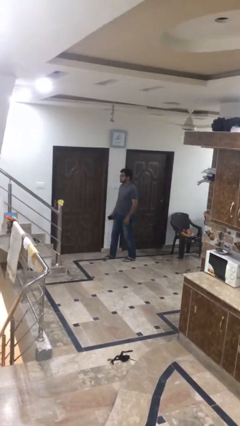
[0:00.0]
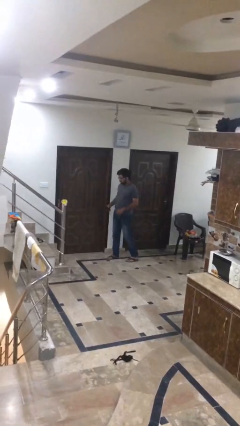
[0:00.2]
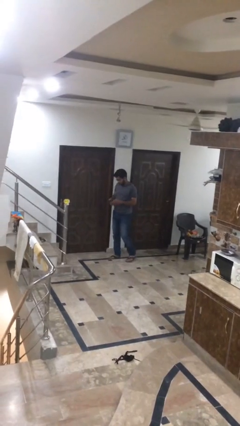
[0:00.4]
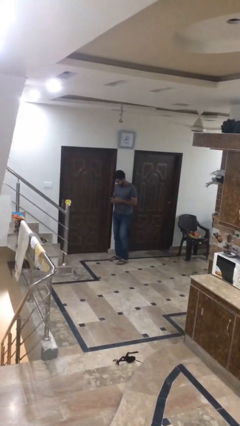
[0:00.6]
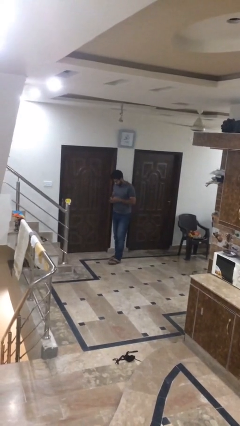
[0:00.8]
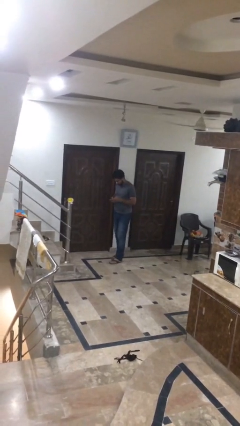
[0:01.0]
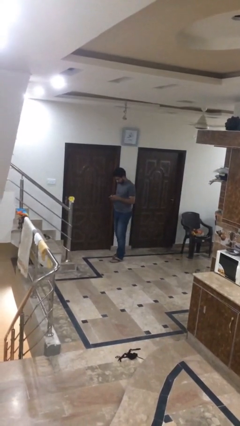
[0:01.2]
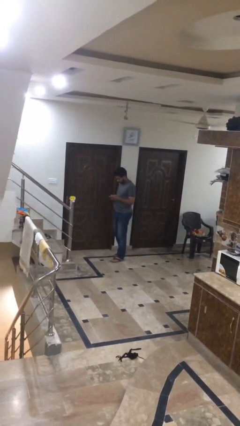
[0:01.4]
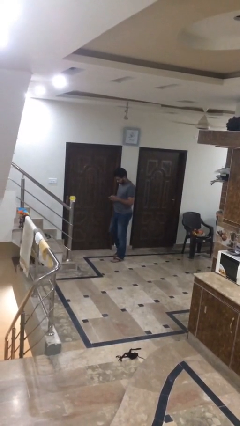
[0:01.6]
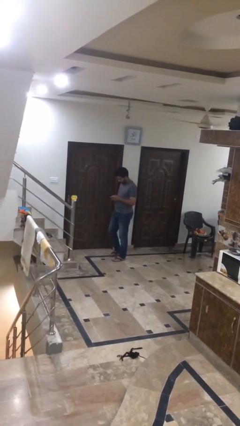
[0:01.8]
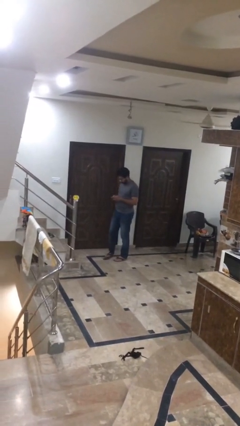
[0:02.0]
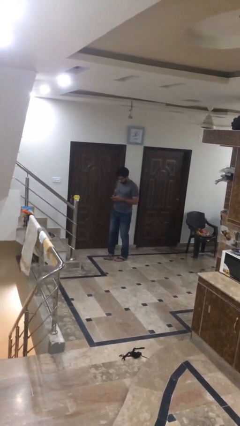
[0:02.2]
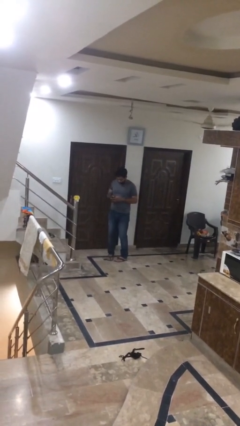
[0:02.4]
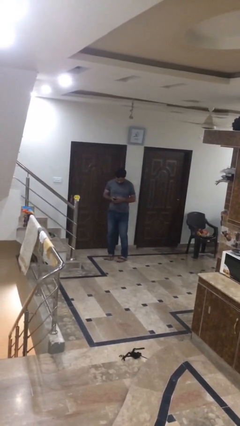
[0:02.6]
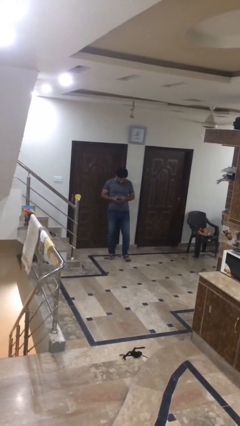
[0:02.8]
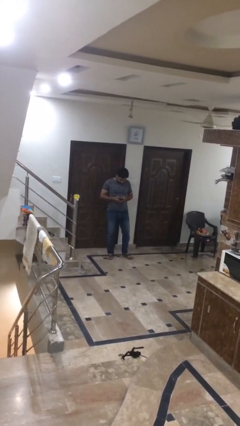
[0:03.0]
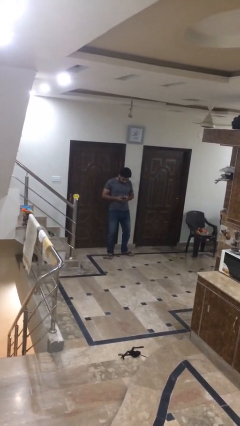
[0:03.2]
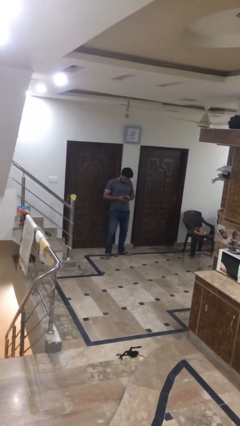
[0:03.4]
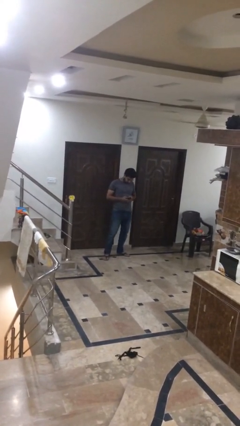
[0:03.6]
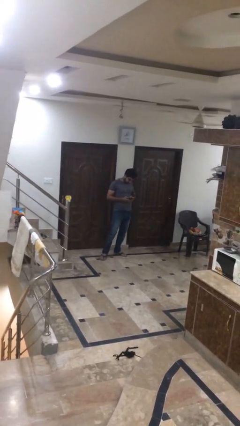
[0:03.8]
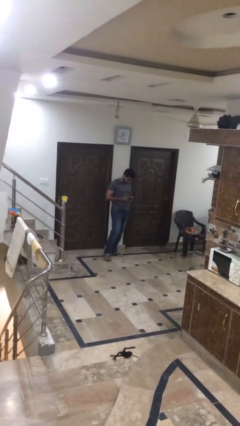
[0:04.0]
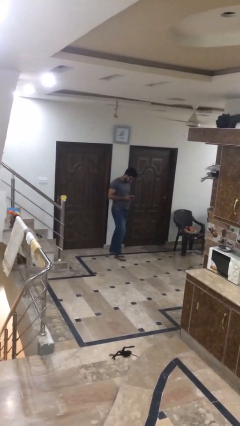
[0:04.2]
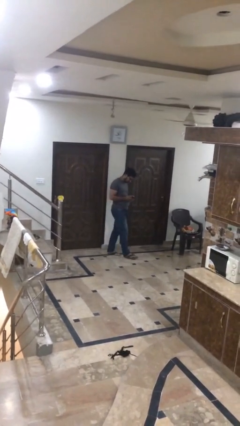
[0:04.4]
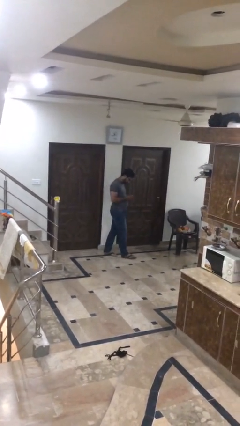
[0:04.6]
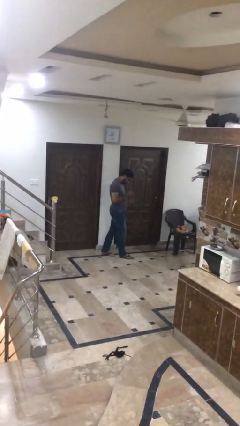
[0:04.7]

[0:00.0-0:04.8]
person texts on phone

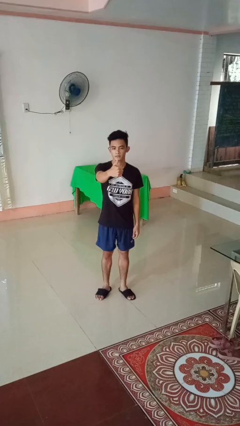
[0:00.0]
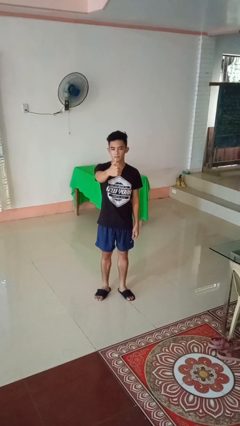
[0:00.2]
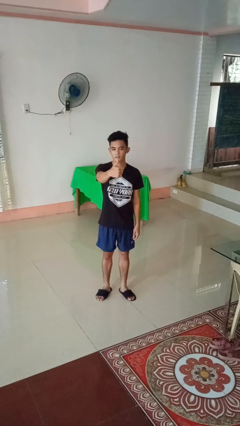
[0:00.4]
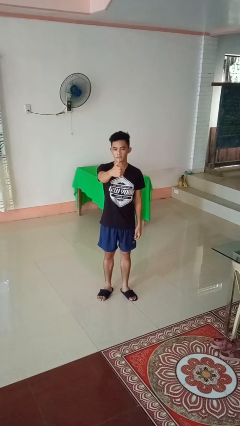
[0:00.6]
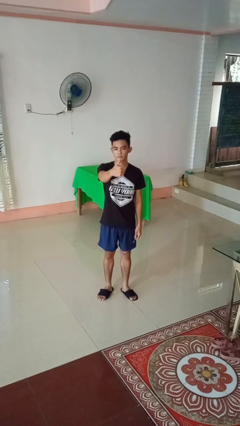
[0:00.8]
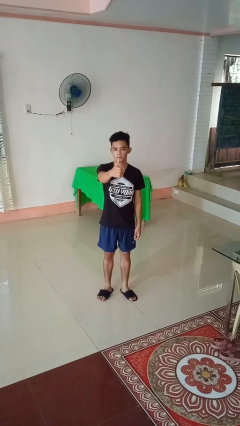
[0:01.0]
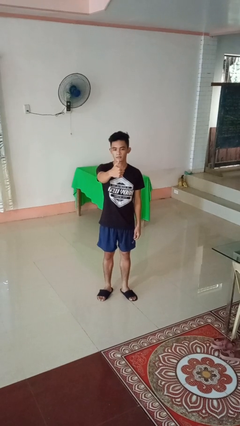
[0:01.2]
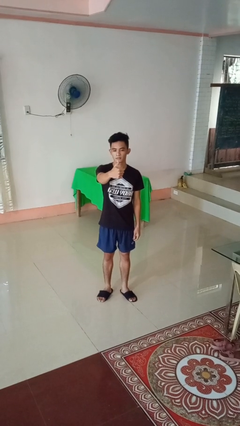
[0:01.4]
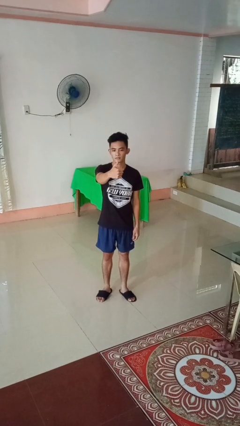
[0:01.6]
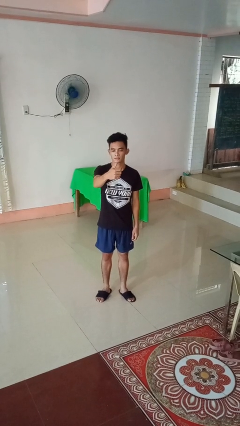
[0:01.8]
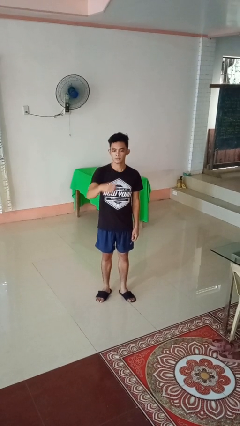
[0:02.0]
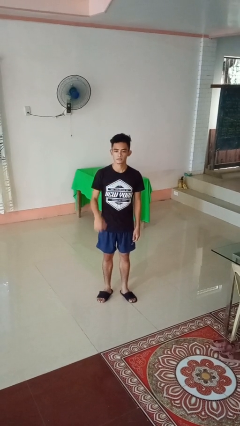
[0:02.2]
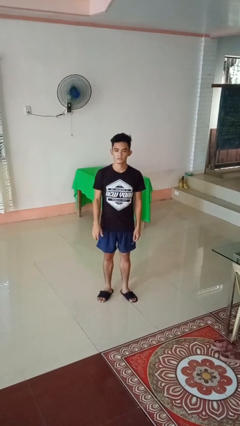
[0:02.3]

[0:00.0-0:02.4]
person gestures thumbs up

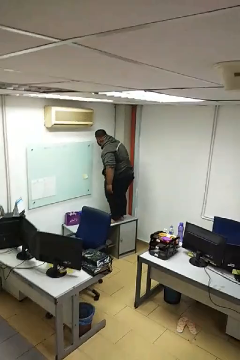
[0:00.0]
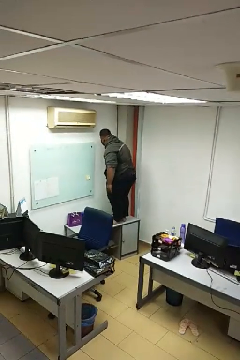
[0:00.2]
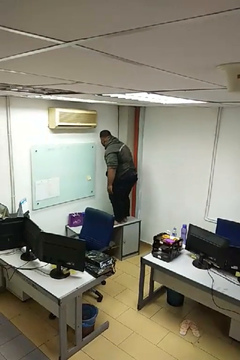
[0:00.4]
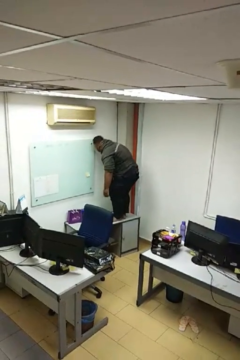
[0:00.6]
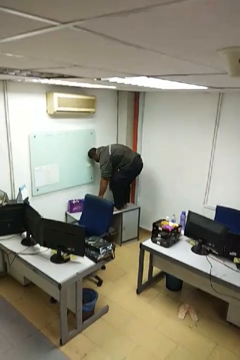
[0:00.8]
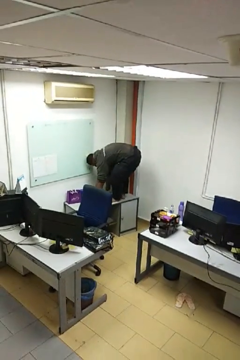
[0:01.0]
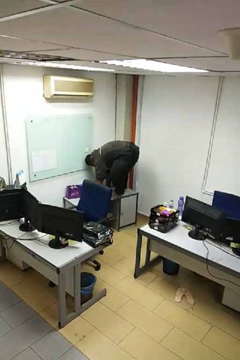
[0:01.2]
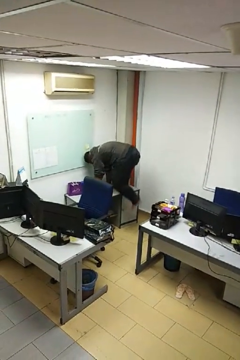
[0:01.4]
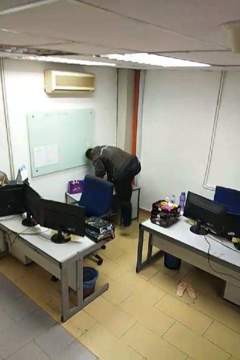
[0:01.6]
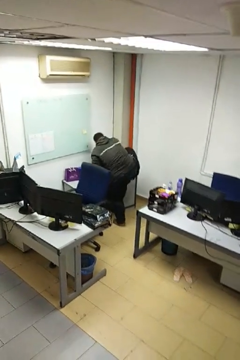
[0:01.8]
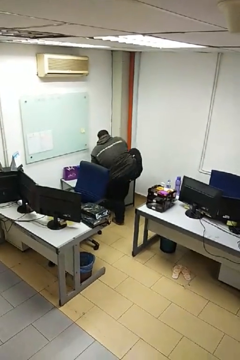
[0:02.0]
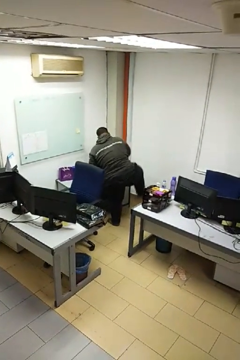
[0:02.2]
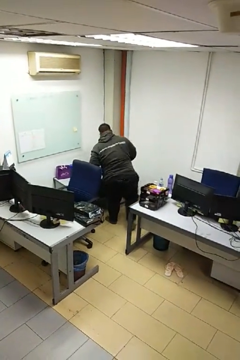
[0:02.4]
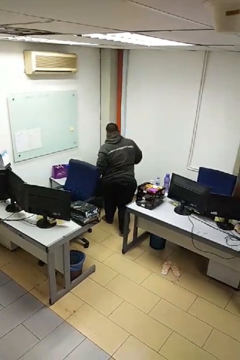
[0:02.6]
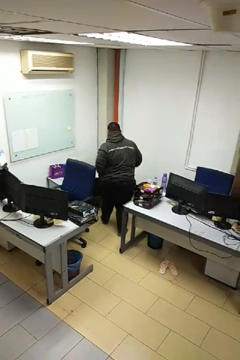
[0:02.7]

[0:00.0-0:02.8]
person climbs off table

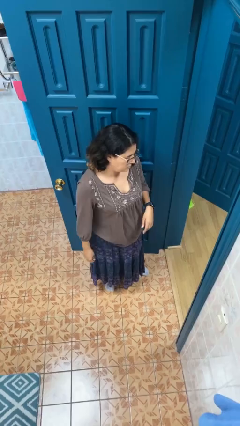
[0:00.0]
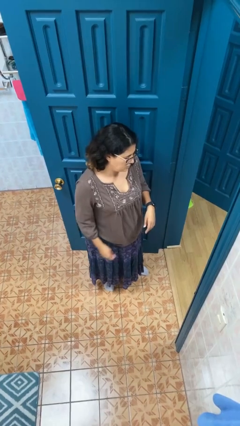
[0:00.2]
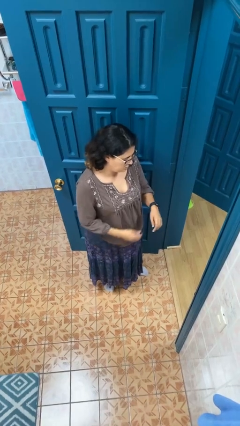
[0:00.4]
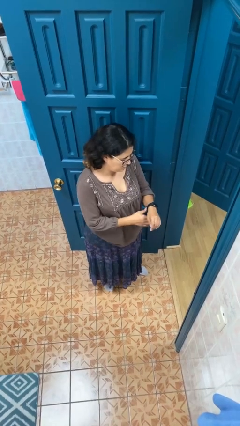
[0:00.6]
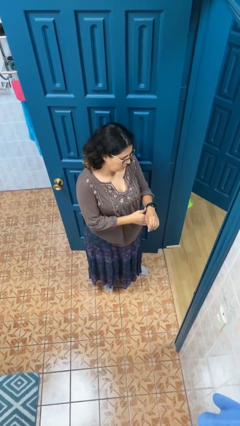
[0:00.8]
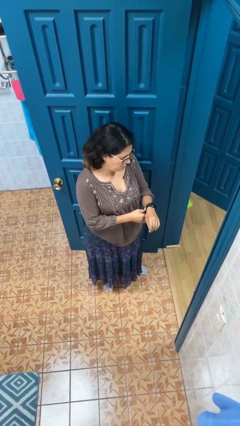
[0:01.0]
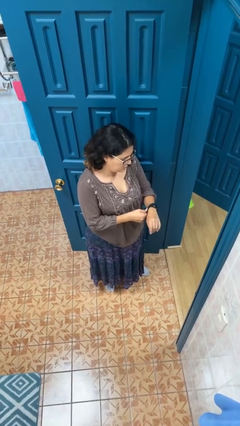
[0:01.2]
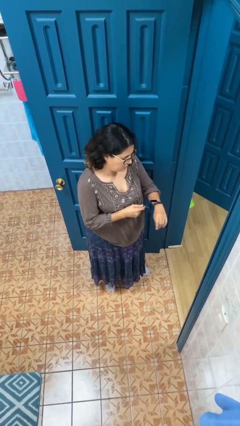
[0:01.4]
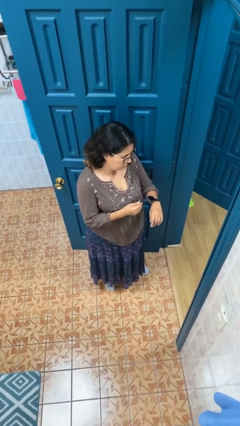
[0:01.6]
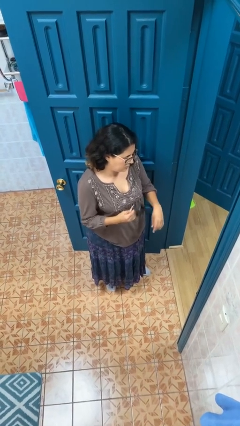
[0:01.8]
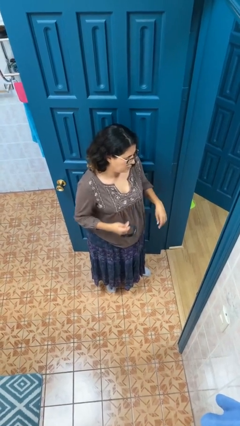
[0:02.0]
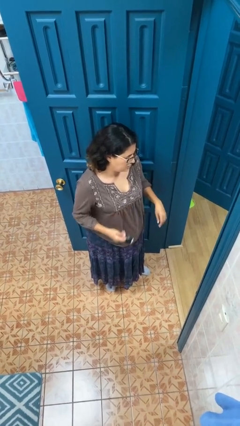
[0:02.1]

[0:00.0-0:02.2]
person takes off wristwatch

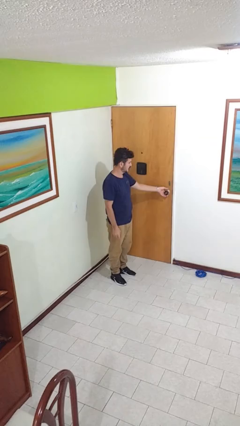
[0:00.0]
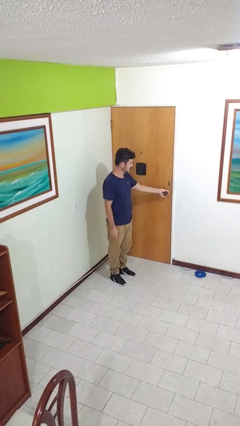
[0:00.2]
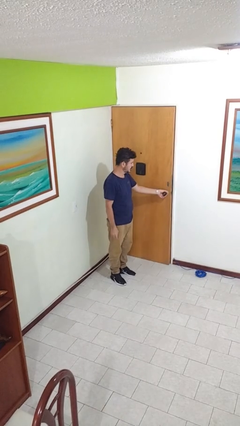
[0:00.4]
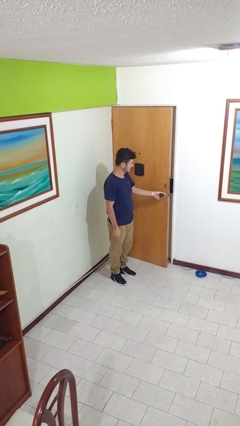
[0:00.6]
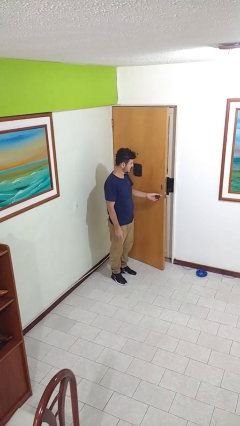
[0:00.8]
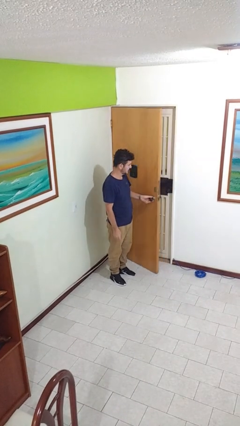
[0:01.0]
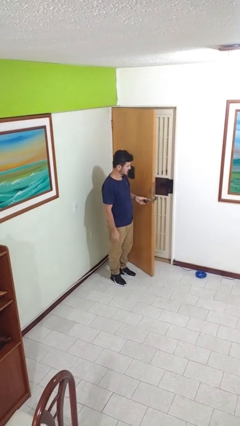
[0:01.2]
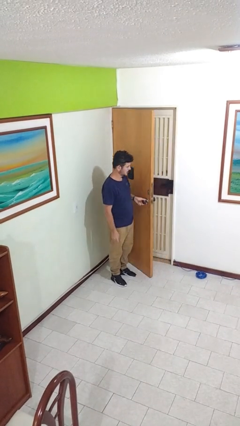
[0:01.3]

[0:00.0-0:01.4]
person opens facility door

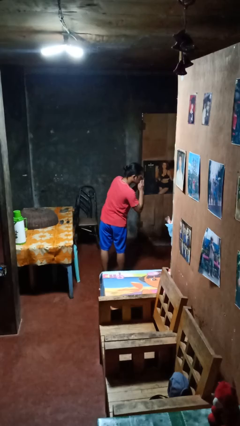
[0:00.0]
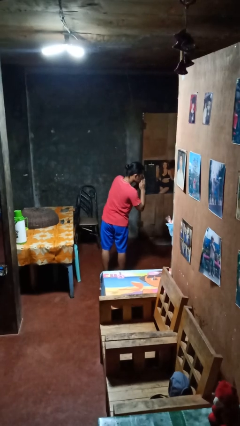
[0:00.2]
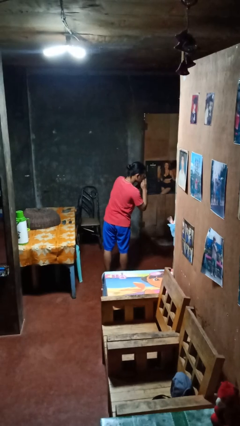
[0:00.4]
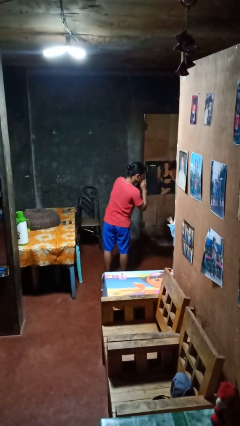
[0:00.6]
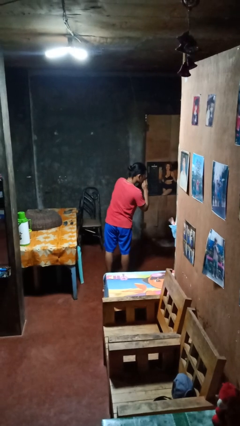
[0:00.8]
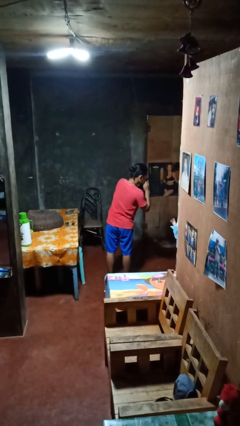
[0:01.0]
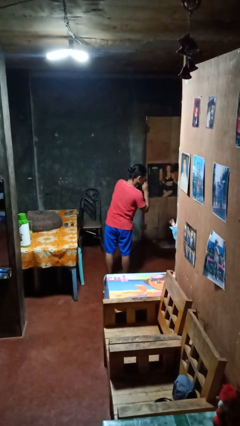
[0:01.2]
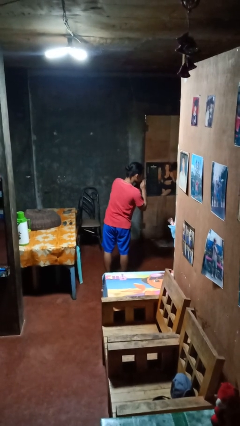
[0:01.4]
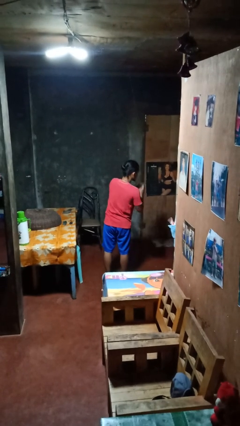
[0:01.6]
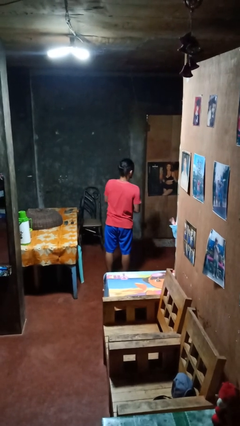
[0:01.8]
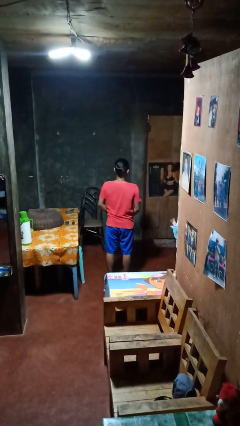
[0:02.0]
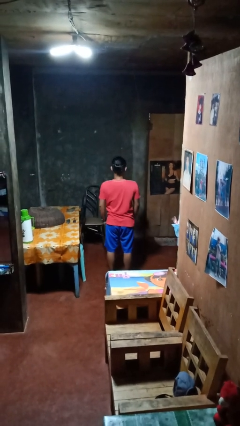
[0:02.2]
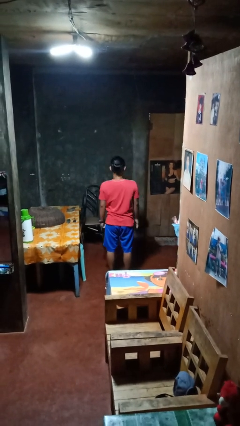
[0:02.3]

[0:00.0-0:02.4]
person blows nose

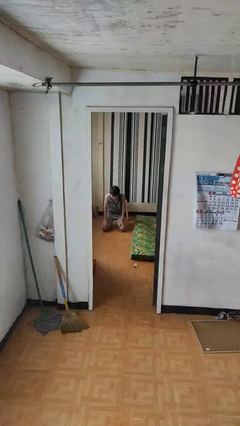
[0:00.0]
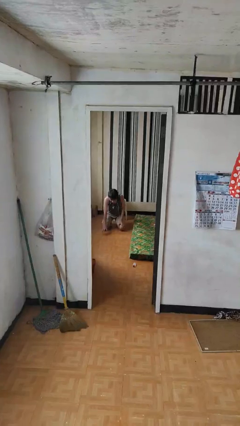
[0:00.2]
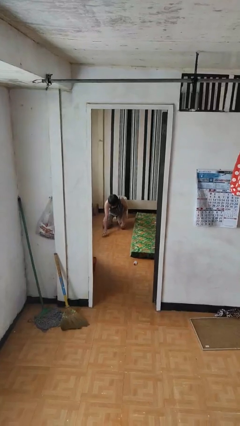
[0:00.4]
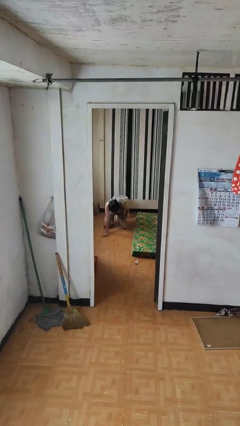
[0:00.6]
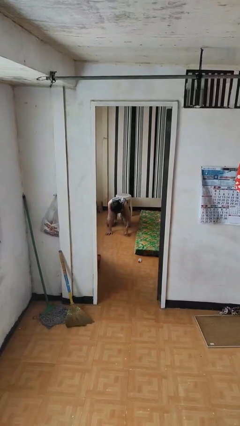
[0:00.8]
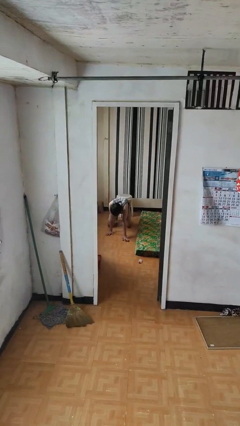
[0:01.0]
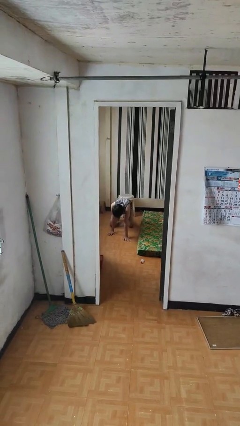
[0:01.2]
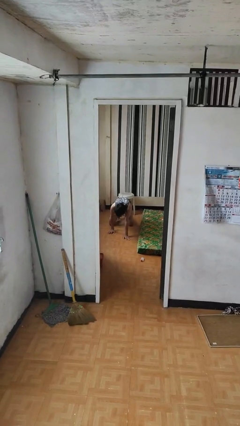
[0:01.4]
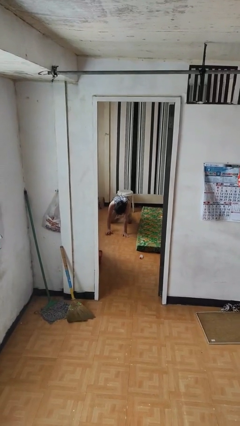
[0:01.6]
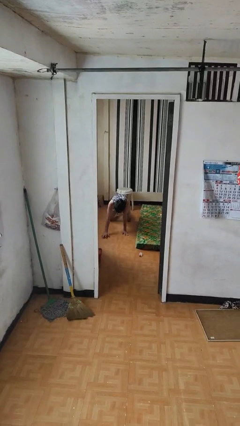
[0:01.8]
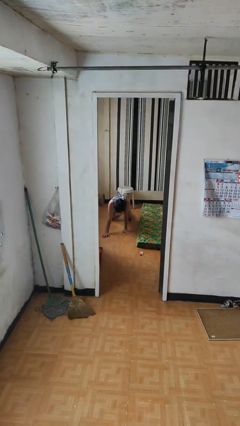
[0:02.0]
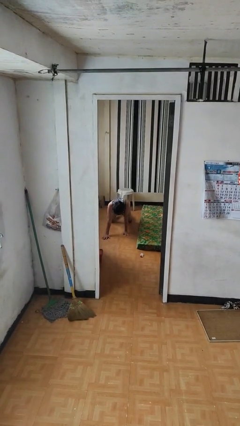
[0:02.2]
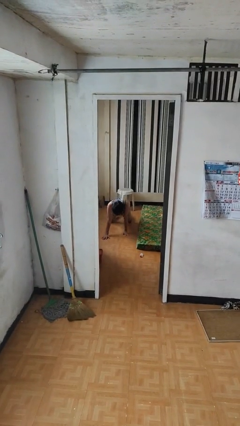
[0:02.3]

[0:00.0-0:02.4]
person crawls
